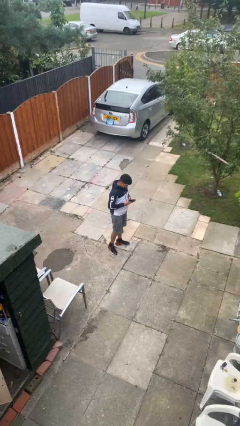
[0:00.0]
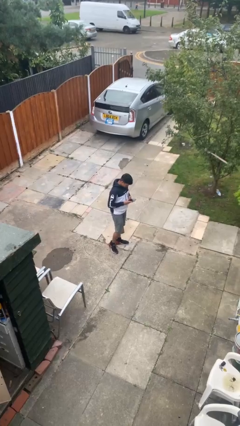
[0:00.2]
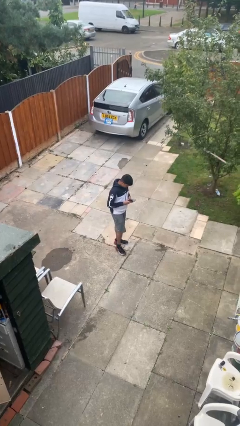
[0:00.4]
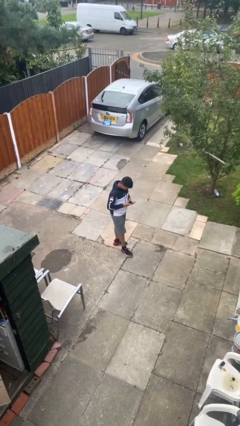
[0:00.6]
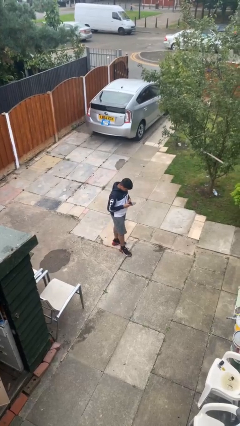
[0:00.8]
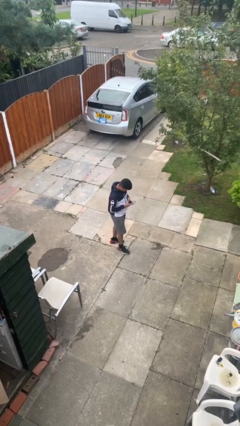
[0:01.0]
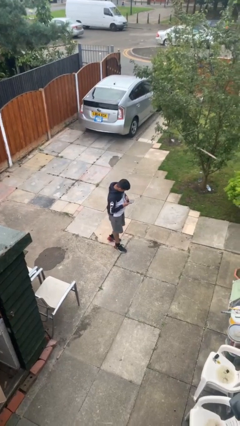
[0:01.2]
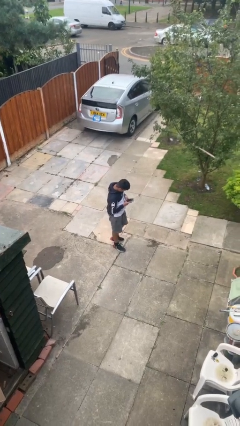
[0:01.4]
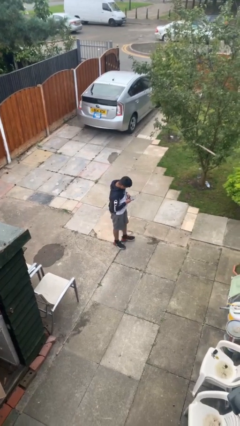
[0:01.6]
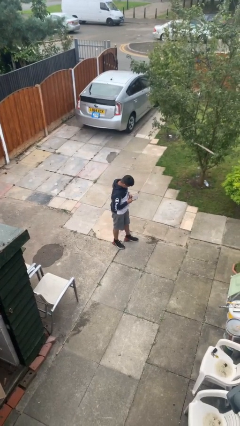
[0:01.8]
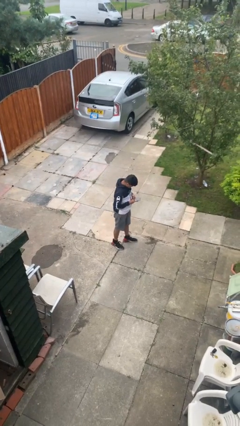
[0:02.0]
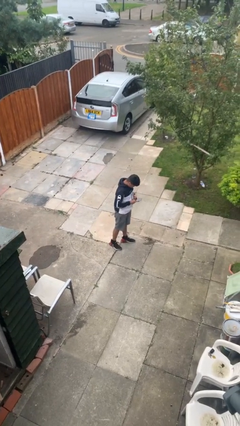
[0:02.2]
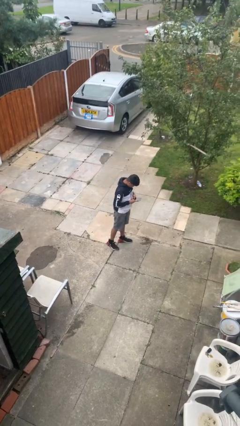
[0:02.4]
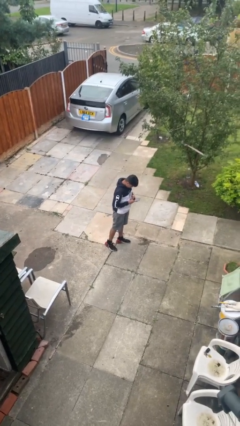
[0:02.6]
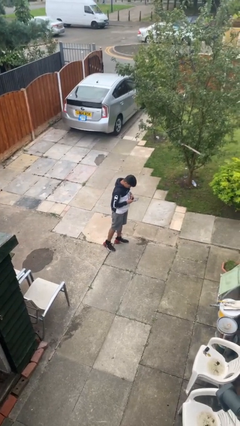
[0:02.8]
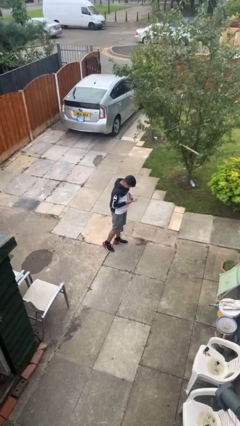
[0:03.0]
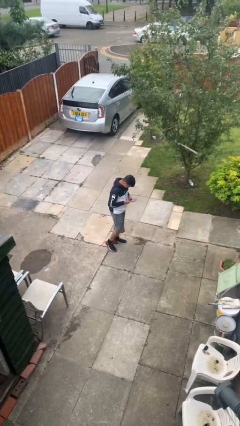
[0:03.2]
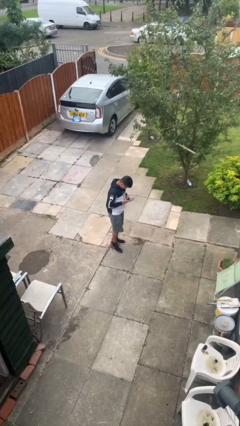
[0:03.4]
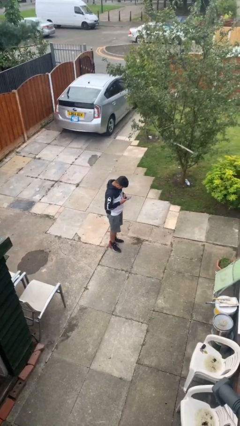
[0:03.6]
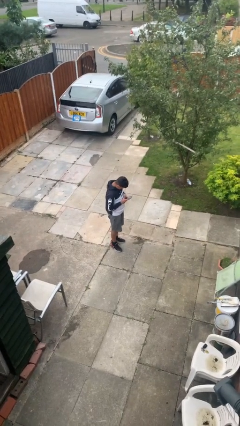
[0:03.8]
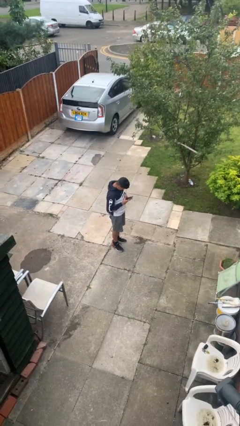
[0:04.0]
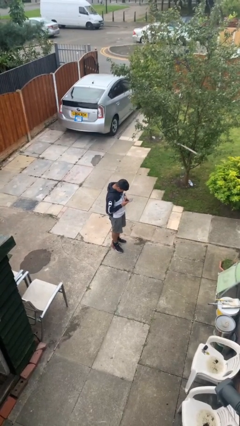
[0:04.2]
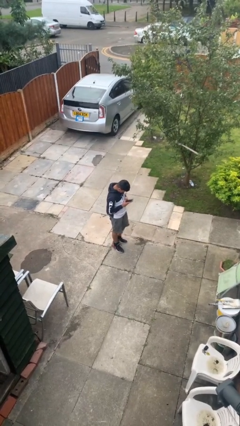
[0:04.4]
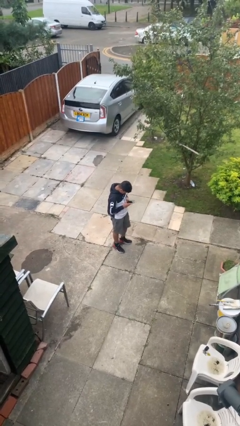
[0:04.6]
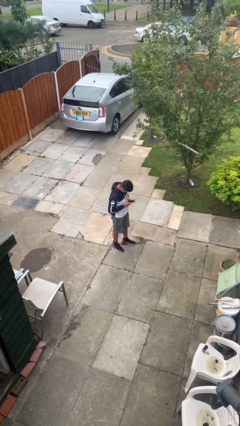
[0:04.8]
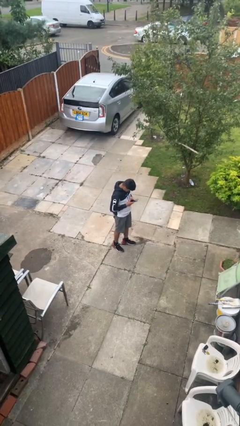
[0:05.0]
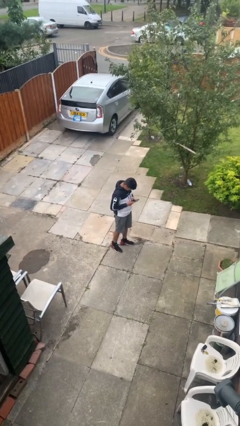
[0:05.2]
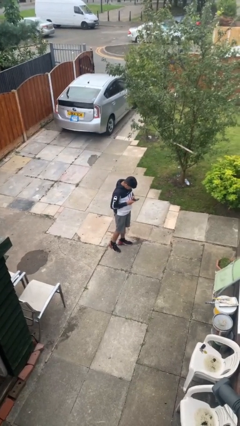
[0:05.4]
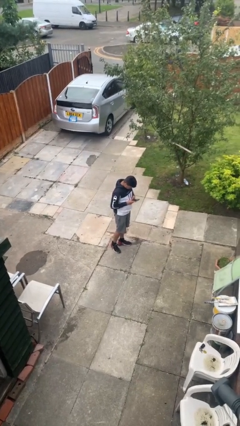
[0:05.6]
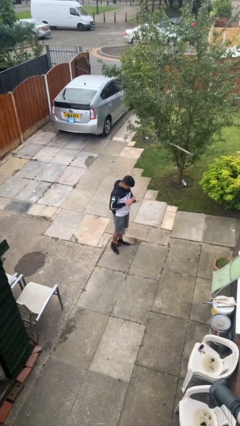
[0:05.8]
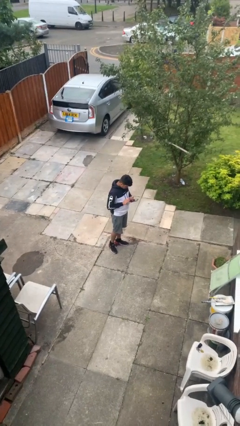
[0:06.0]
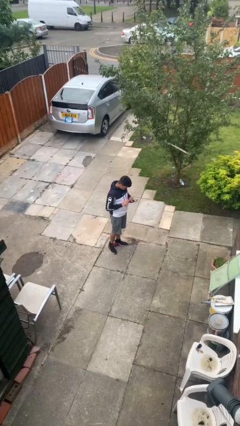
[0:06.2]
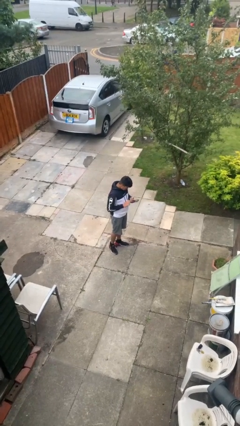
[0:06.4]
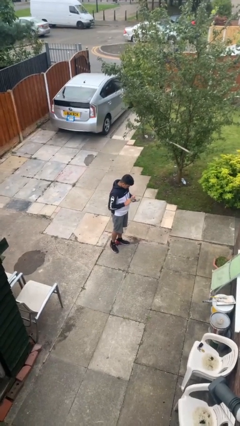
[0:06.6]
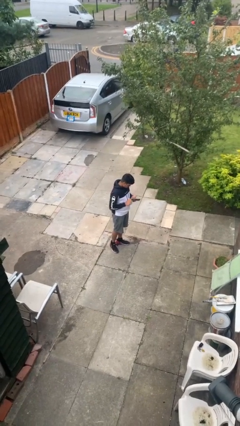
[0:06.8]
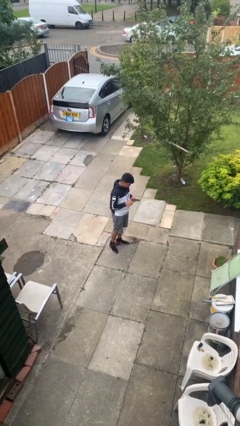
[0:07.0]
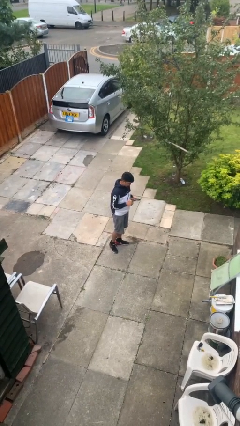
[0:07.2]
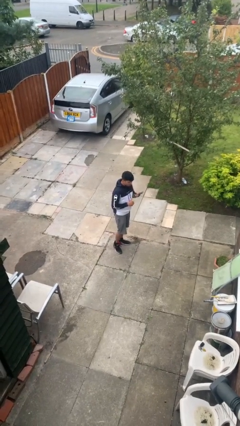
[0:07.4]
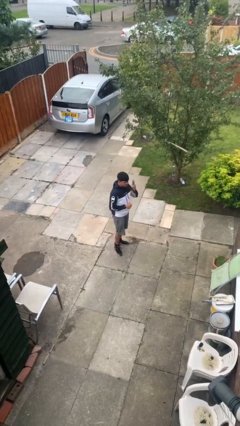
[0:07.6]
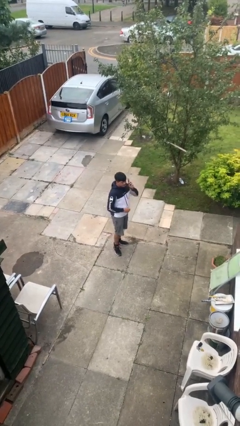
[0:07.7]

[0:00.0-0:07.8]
person texts on phone

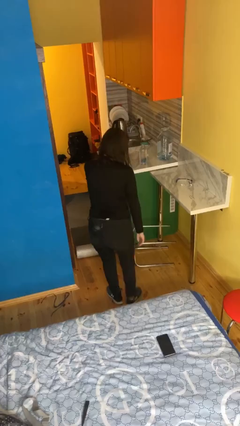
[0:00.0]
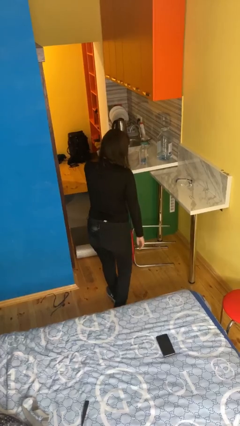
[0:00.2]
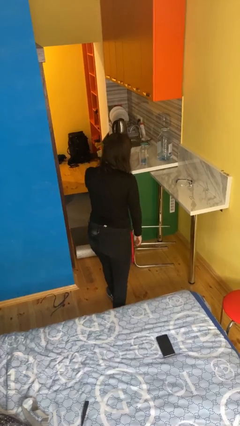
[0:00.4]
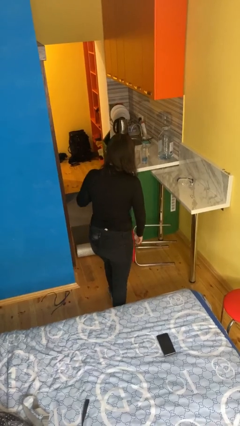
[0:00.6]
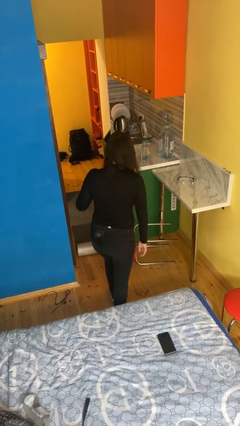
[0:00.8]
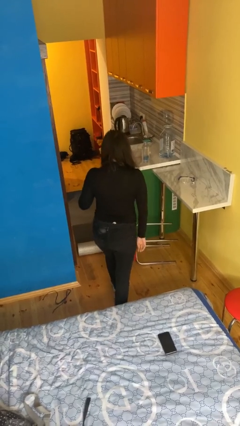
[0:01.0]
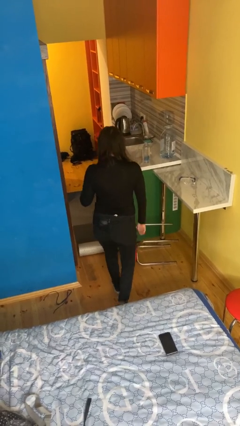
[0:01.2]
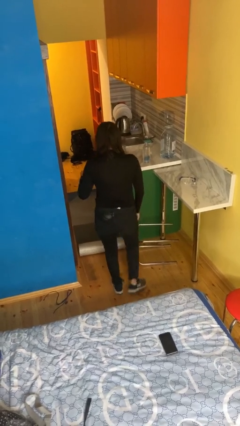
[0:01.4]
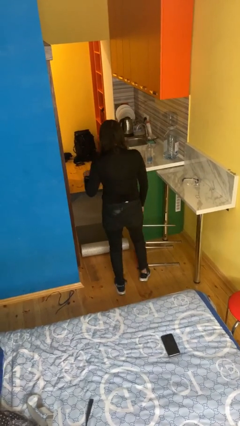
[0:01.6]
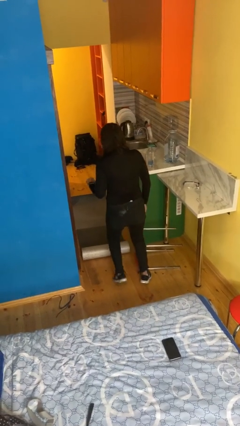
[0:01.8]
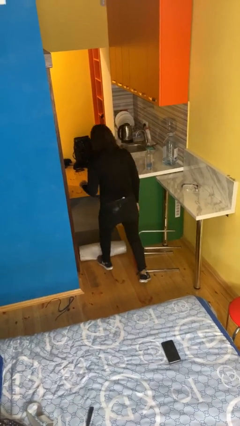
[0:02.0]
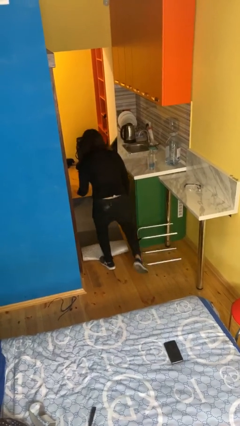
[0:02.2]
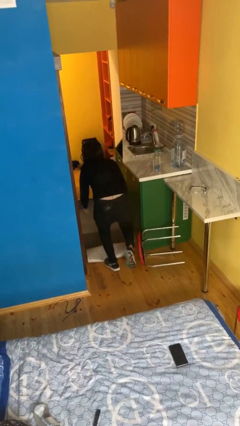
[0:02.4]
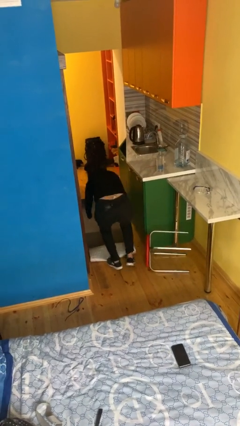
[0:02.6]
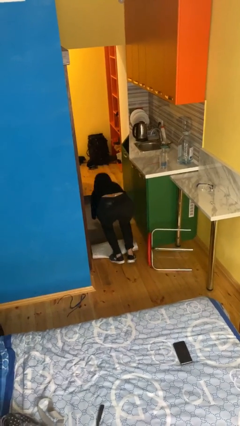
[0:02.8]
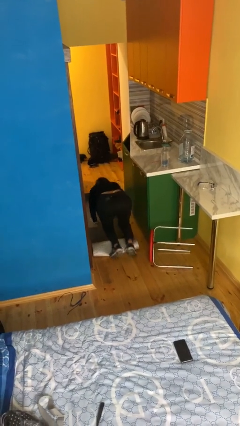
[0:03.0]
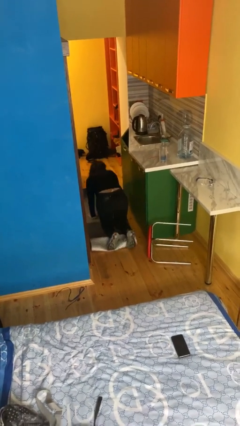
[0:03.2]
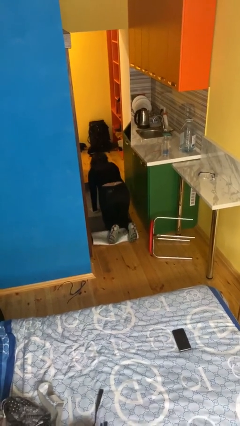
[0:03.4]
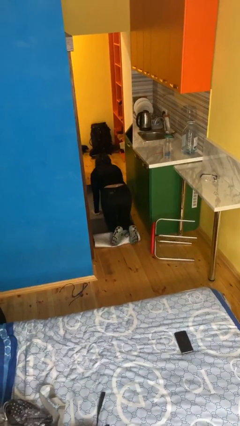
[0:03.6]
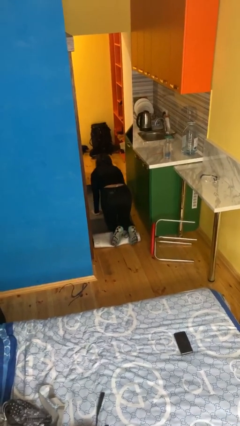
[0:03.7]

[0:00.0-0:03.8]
person trips on object on floor

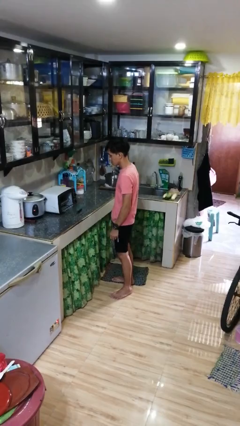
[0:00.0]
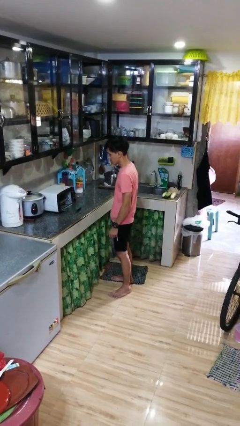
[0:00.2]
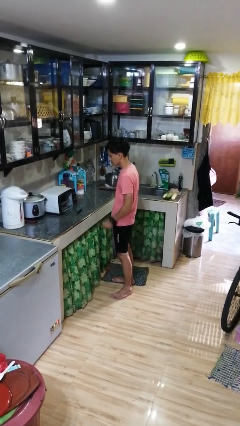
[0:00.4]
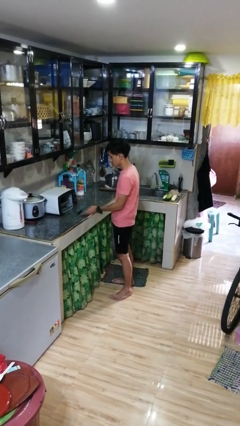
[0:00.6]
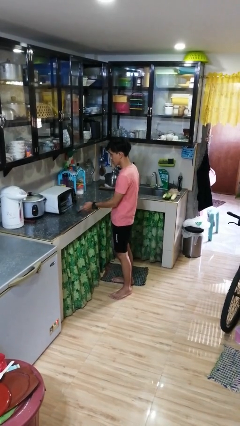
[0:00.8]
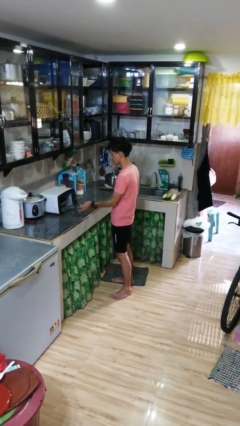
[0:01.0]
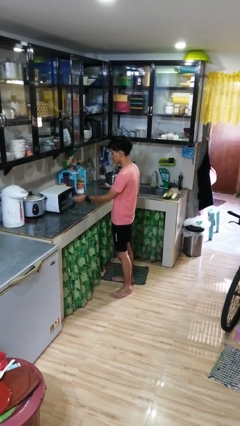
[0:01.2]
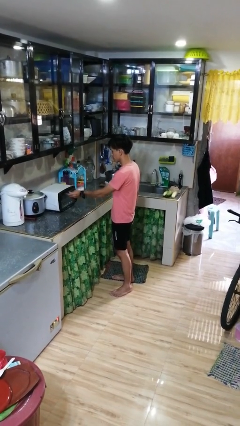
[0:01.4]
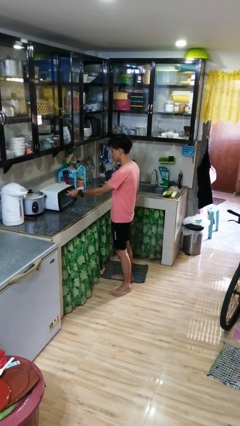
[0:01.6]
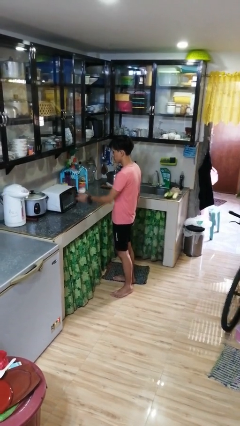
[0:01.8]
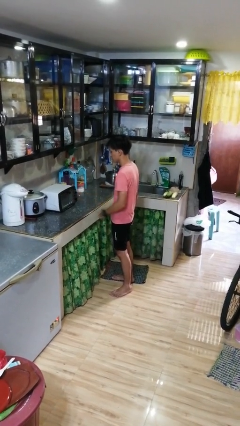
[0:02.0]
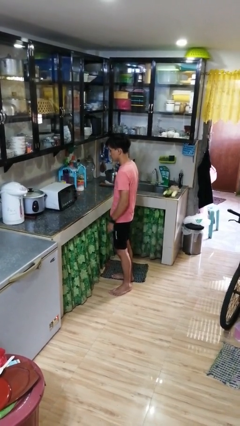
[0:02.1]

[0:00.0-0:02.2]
person closes microwave

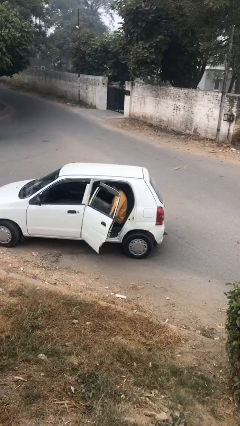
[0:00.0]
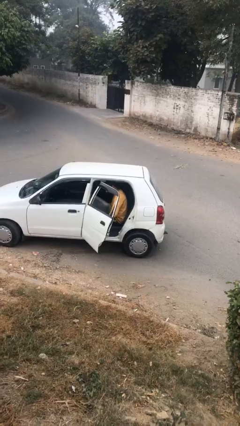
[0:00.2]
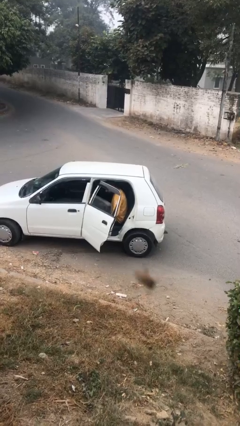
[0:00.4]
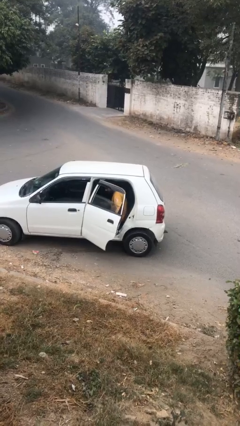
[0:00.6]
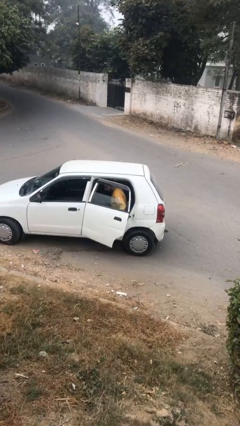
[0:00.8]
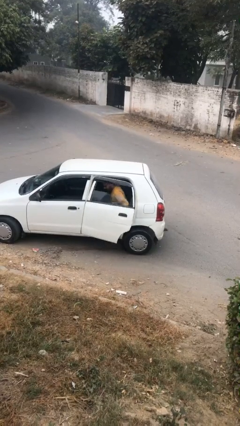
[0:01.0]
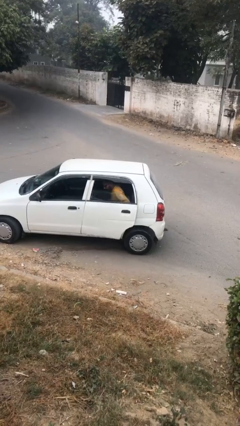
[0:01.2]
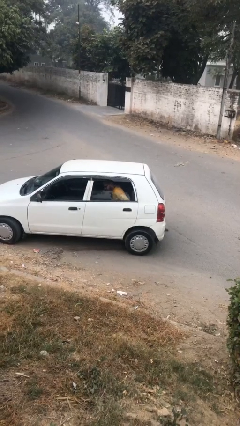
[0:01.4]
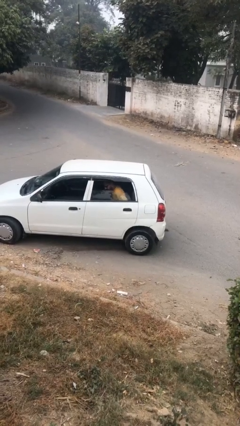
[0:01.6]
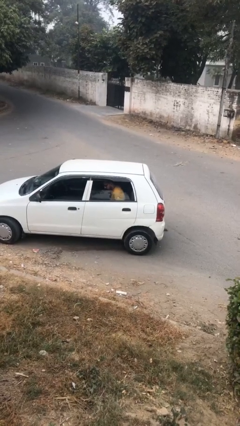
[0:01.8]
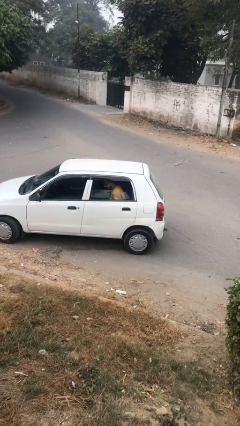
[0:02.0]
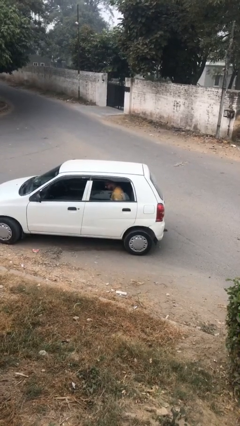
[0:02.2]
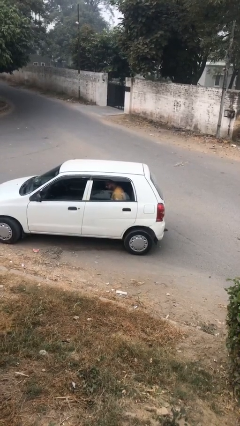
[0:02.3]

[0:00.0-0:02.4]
person closes car door

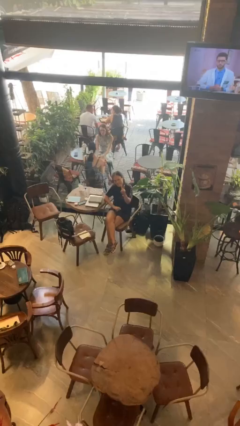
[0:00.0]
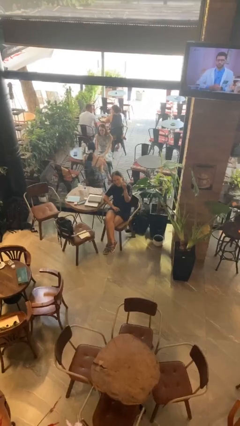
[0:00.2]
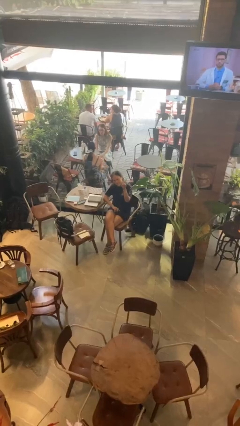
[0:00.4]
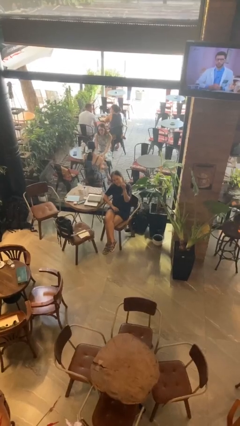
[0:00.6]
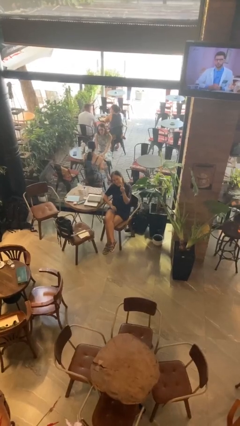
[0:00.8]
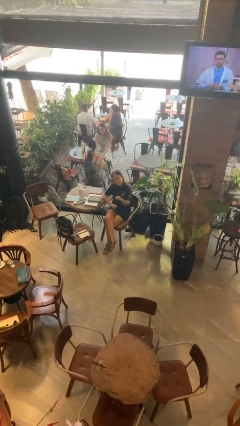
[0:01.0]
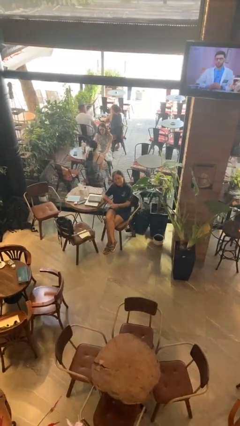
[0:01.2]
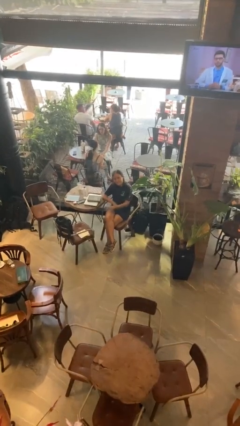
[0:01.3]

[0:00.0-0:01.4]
person gestures peace
